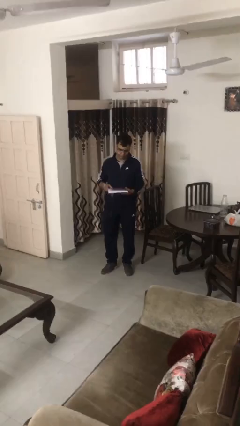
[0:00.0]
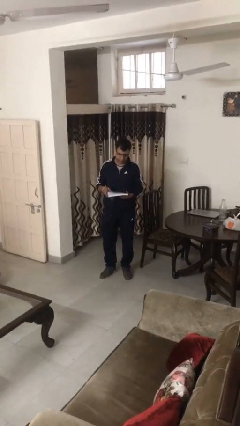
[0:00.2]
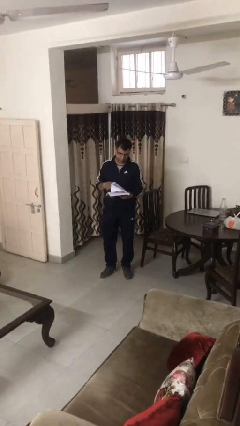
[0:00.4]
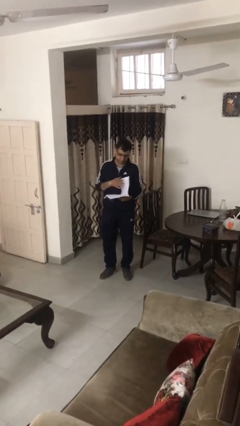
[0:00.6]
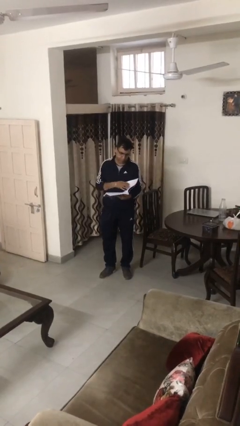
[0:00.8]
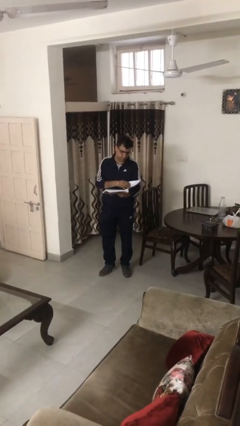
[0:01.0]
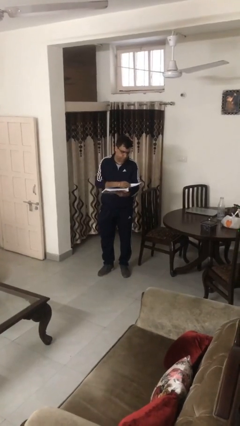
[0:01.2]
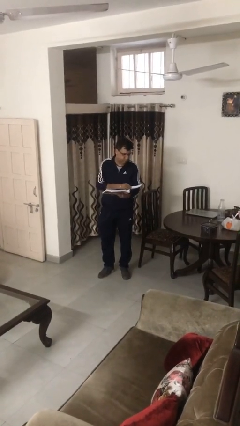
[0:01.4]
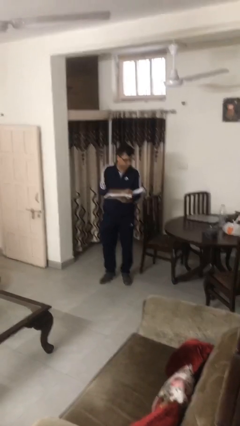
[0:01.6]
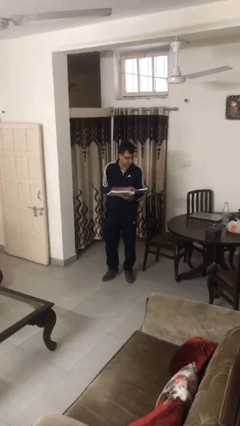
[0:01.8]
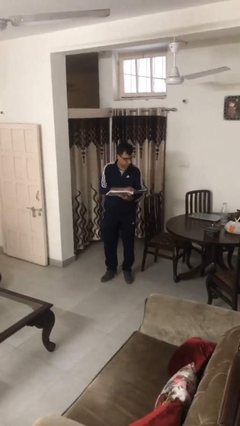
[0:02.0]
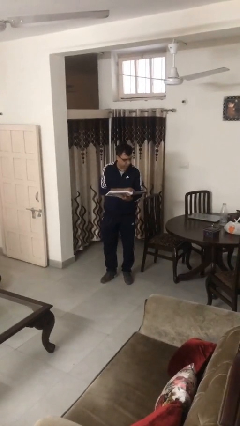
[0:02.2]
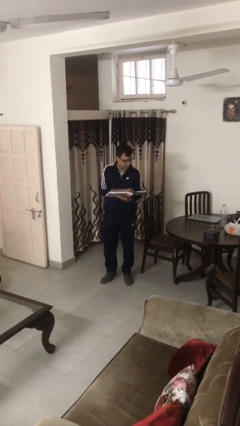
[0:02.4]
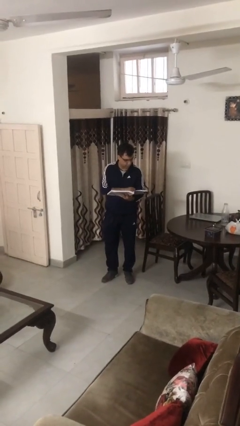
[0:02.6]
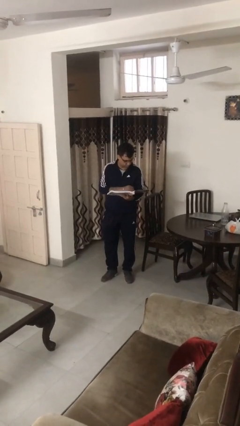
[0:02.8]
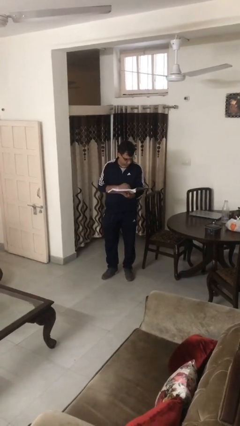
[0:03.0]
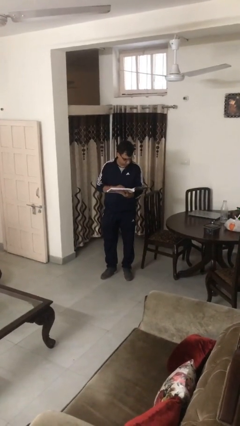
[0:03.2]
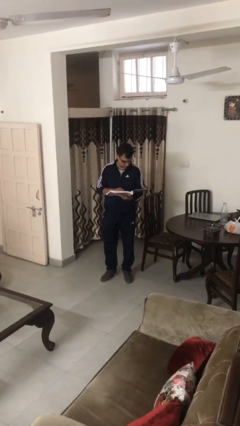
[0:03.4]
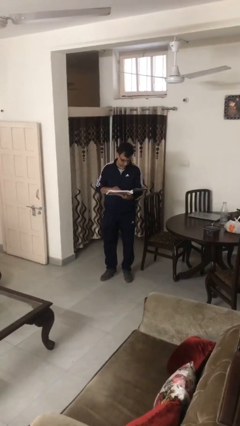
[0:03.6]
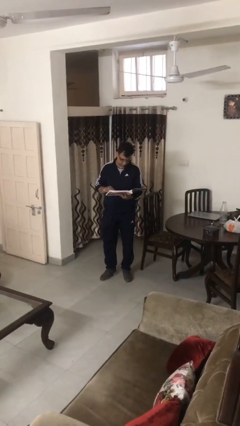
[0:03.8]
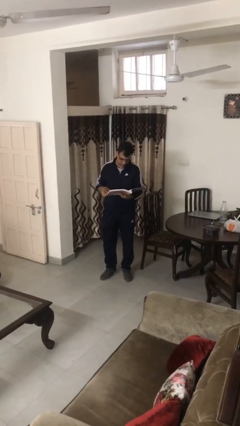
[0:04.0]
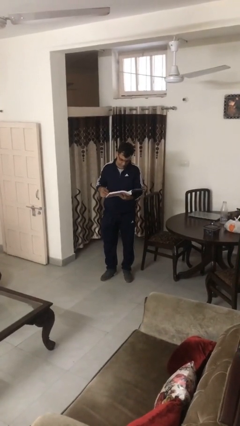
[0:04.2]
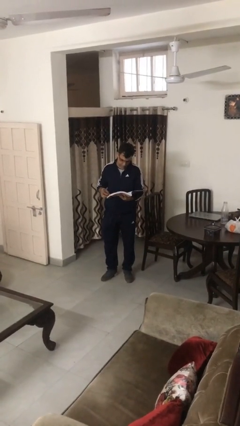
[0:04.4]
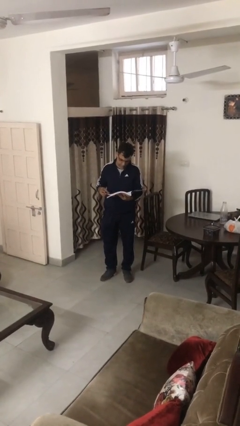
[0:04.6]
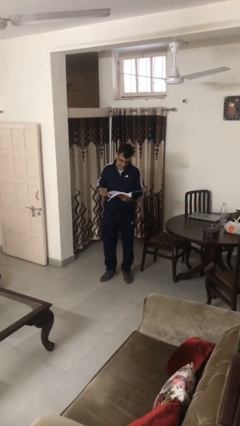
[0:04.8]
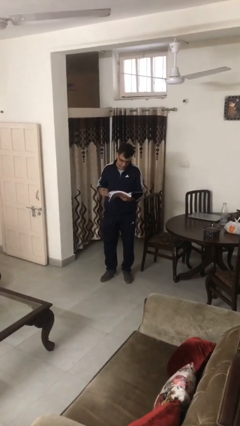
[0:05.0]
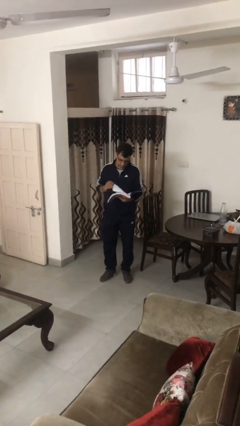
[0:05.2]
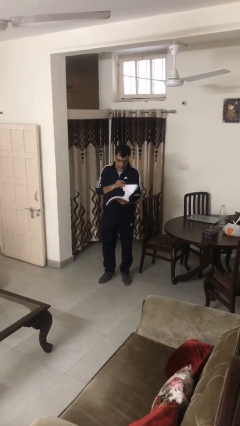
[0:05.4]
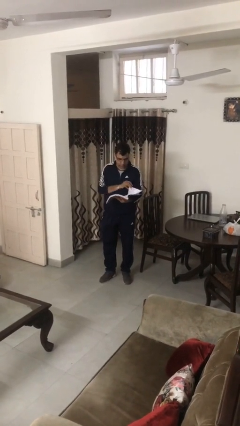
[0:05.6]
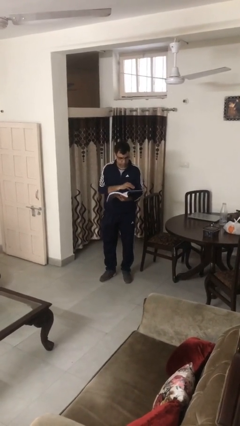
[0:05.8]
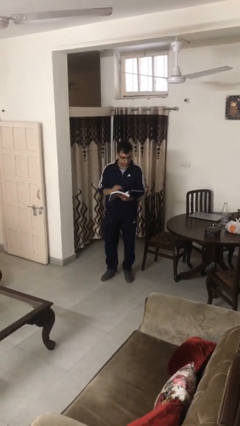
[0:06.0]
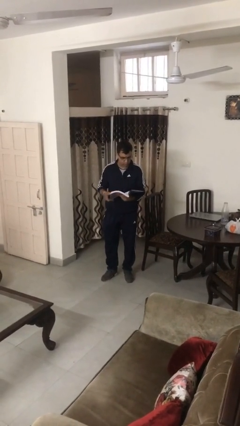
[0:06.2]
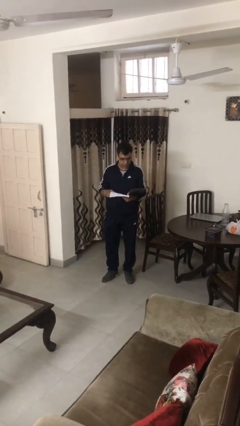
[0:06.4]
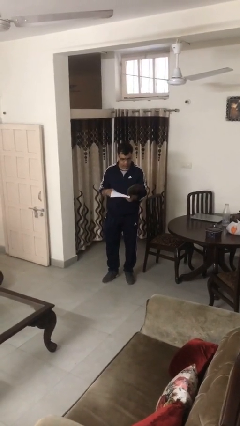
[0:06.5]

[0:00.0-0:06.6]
person reads document

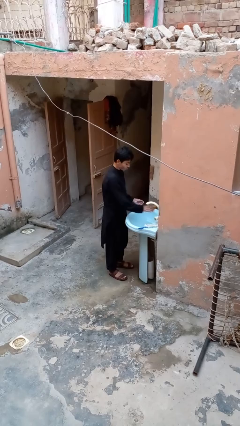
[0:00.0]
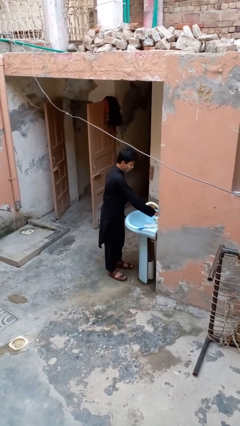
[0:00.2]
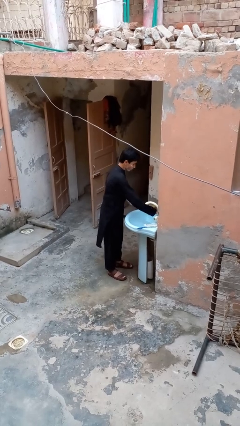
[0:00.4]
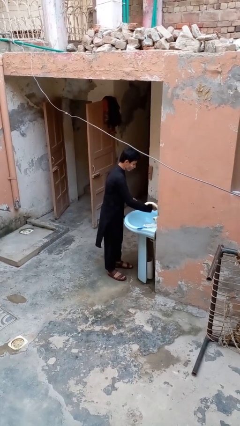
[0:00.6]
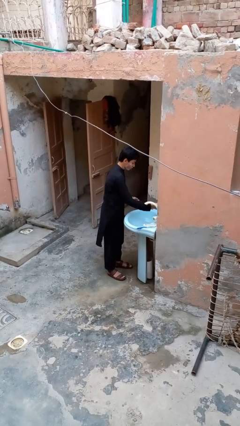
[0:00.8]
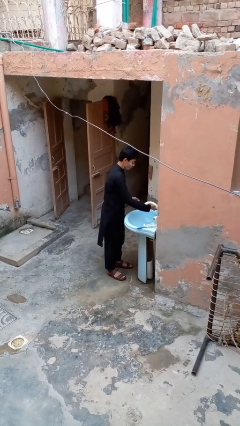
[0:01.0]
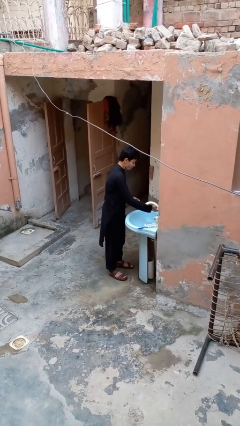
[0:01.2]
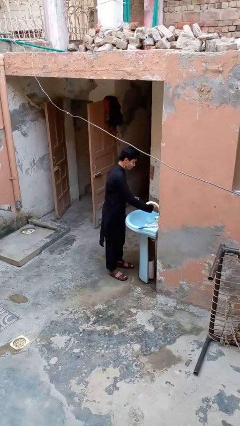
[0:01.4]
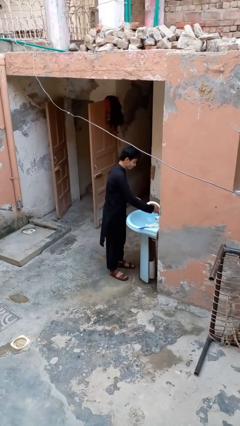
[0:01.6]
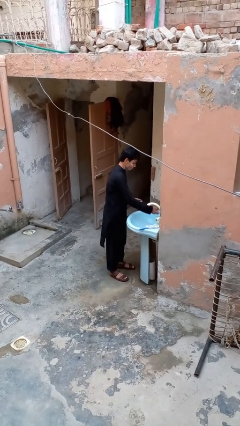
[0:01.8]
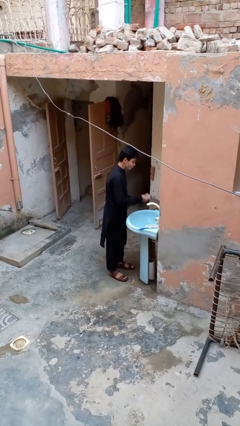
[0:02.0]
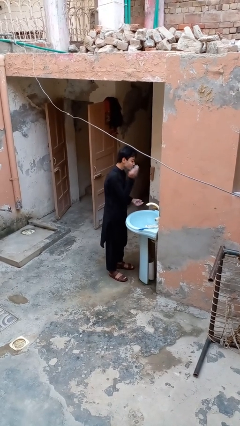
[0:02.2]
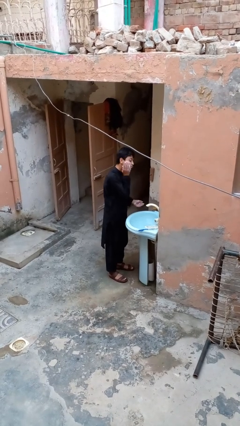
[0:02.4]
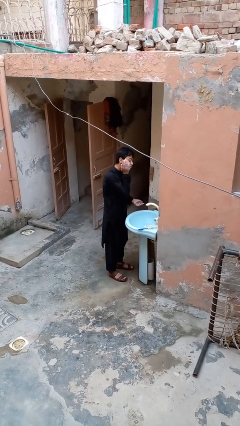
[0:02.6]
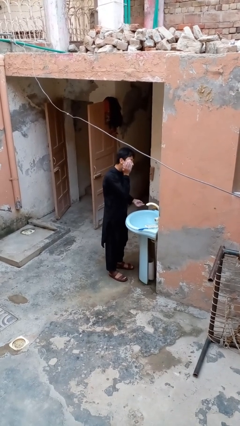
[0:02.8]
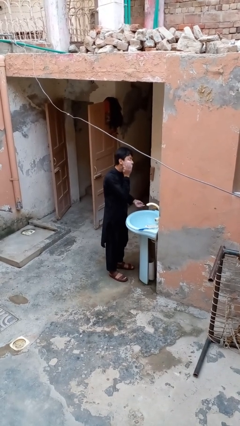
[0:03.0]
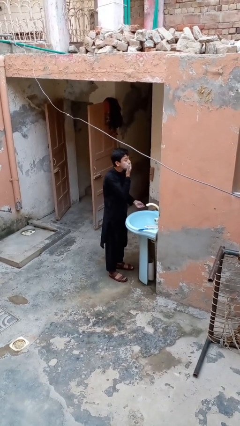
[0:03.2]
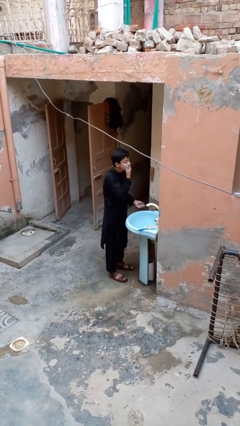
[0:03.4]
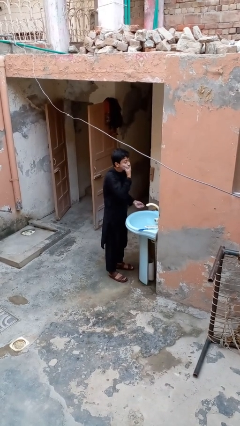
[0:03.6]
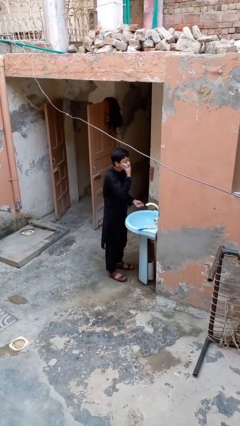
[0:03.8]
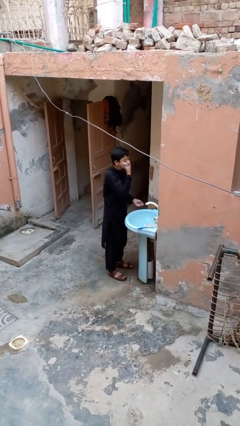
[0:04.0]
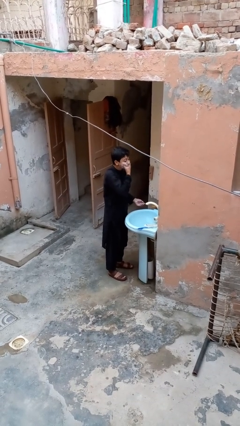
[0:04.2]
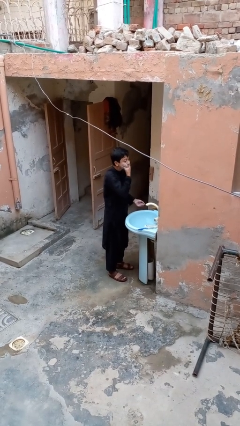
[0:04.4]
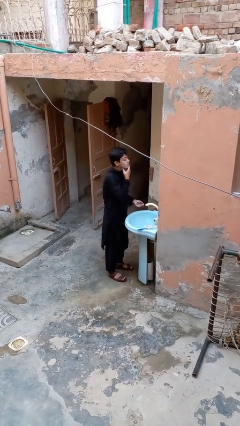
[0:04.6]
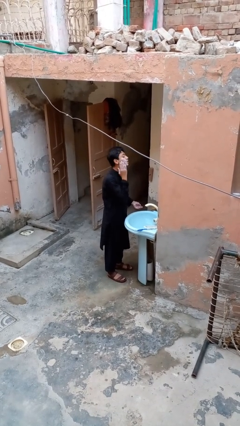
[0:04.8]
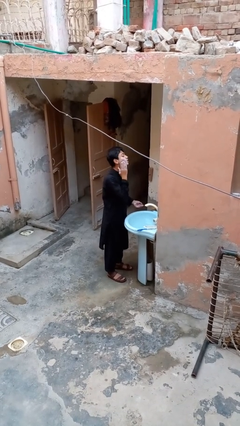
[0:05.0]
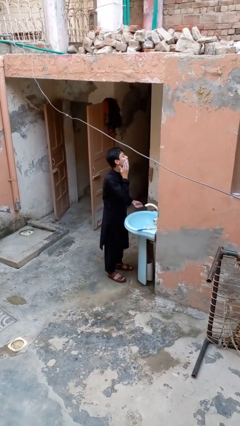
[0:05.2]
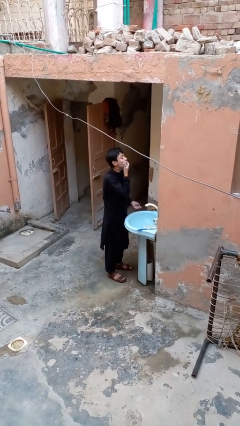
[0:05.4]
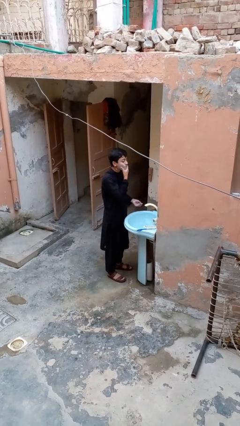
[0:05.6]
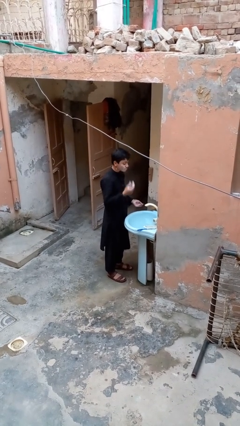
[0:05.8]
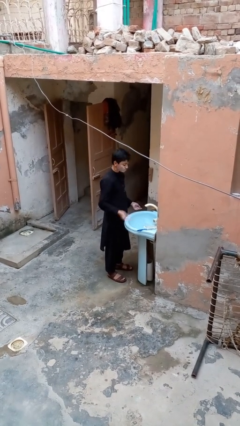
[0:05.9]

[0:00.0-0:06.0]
person applies shaving cream

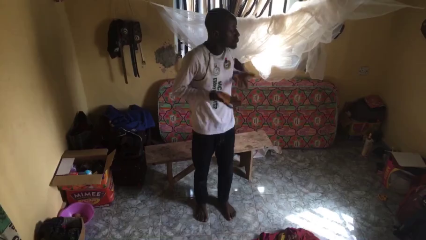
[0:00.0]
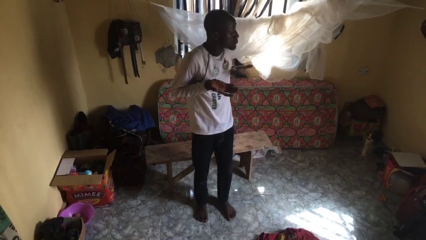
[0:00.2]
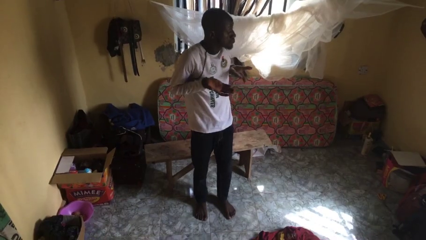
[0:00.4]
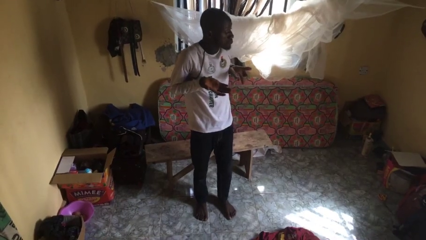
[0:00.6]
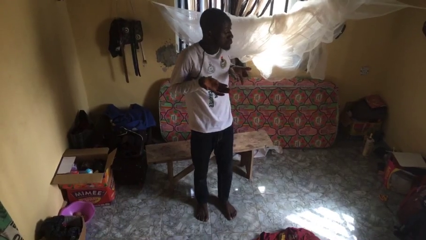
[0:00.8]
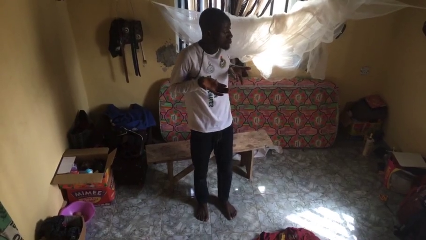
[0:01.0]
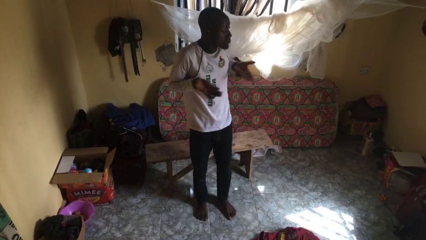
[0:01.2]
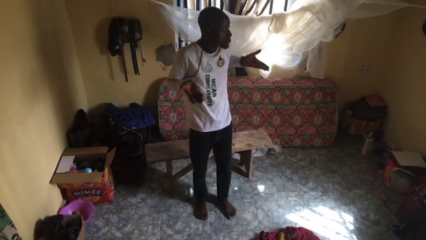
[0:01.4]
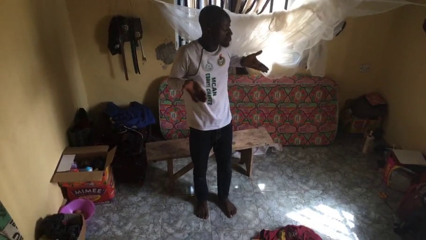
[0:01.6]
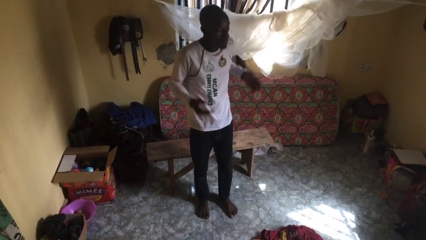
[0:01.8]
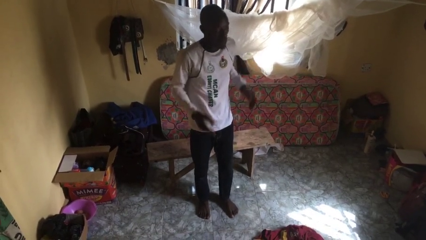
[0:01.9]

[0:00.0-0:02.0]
person shrugs

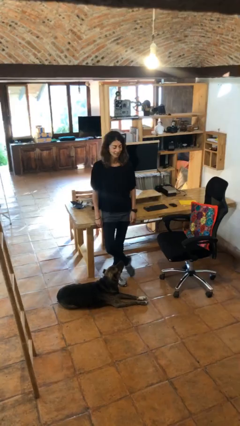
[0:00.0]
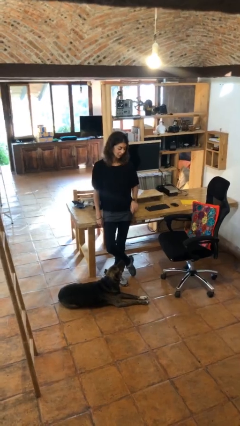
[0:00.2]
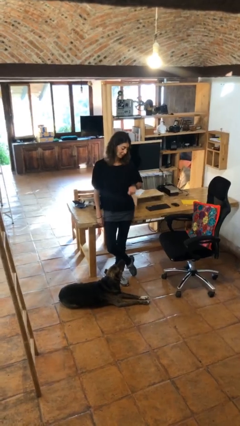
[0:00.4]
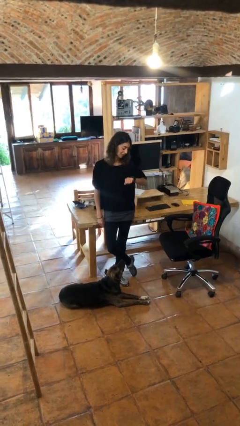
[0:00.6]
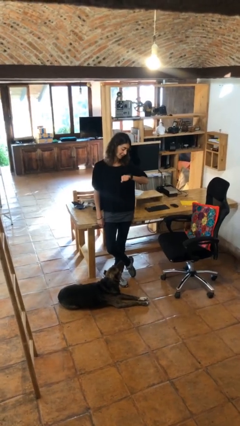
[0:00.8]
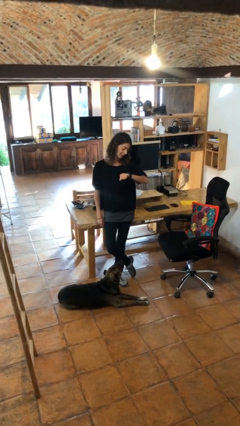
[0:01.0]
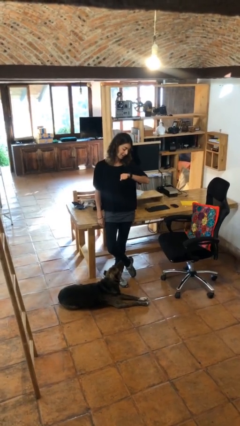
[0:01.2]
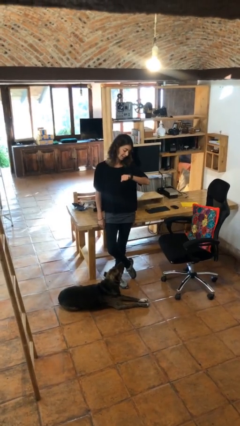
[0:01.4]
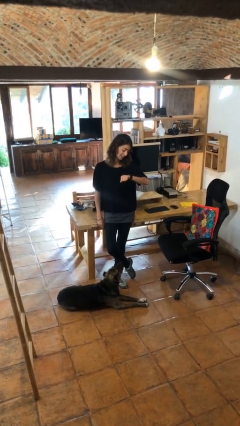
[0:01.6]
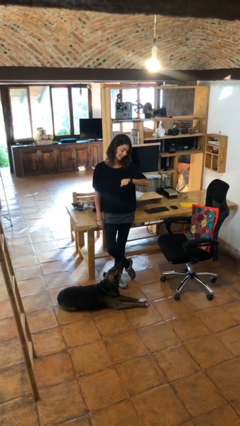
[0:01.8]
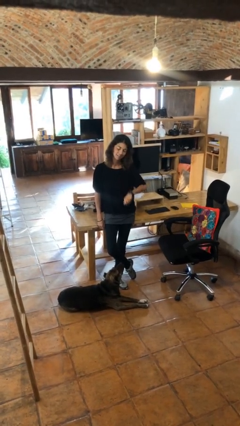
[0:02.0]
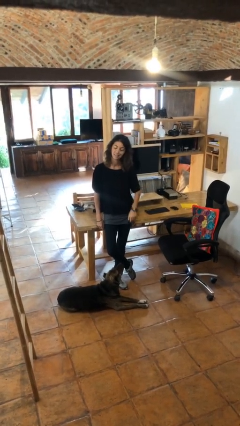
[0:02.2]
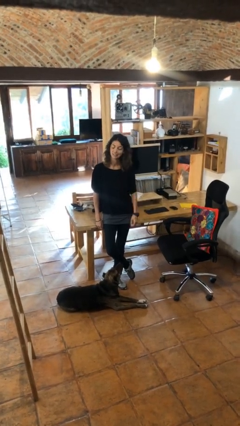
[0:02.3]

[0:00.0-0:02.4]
person looks at wristwatch

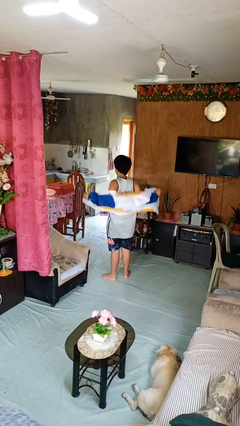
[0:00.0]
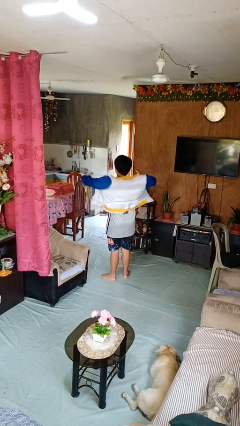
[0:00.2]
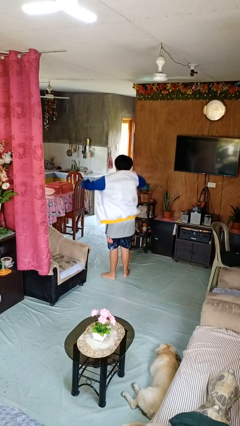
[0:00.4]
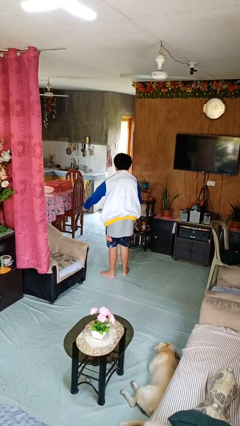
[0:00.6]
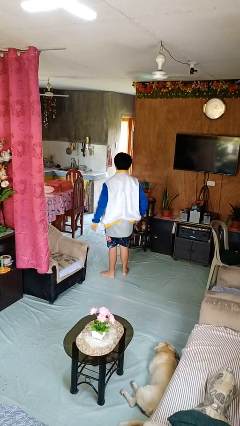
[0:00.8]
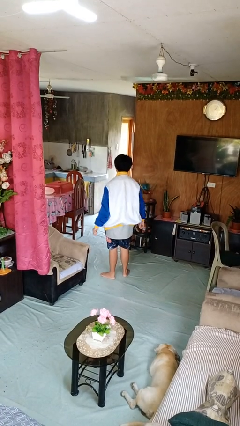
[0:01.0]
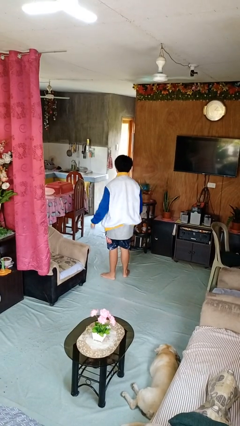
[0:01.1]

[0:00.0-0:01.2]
person puts on jacket
